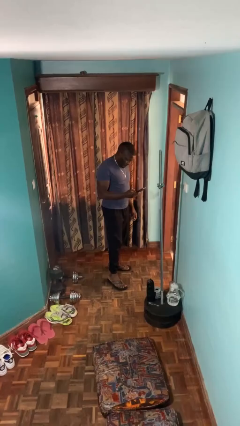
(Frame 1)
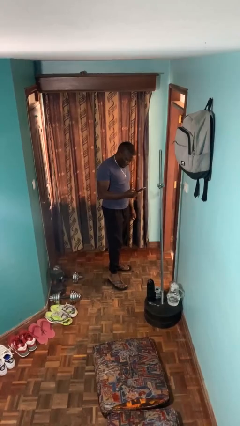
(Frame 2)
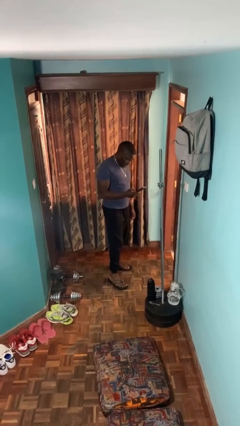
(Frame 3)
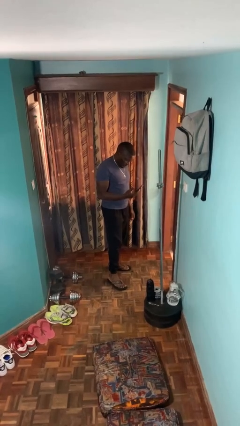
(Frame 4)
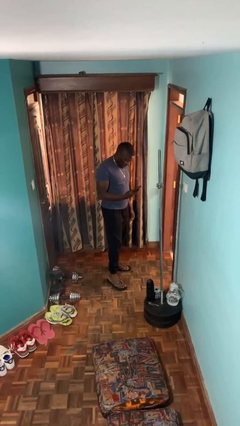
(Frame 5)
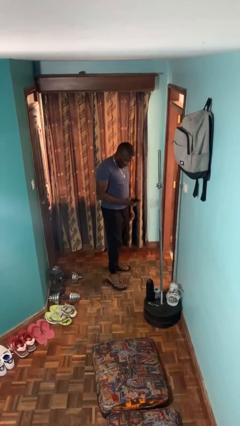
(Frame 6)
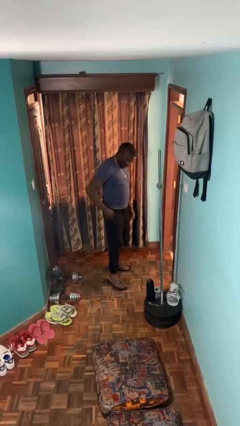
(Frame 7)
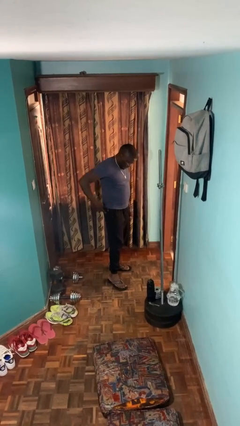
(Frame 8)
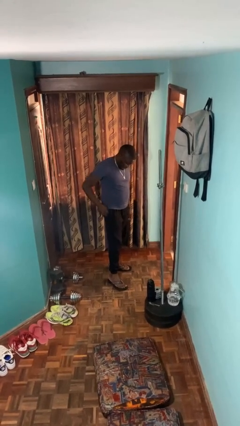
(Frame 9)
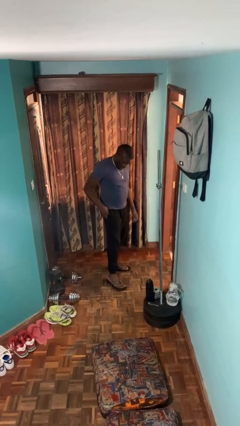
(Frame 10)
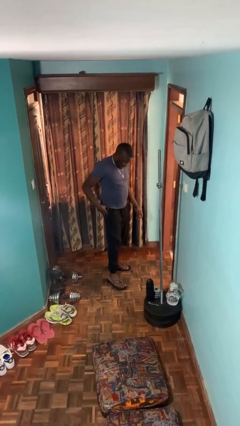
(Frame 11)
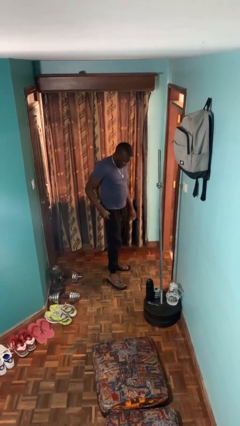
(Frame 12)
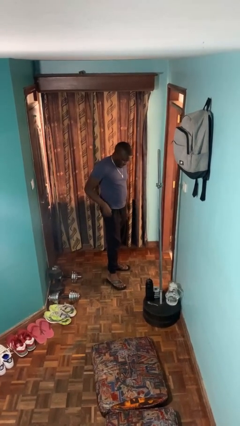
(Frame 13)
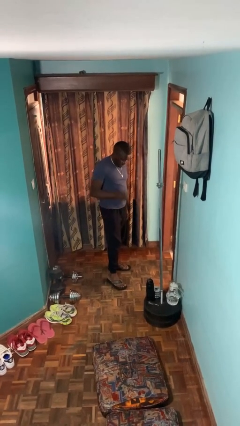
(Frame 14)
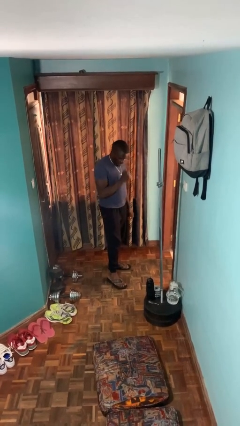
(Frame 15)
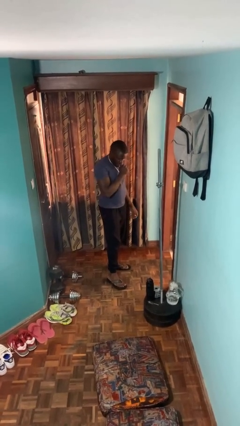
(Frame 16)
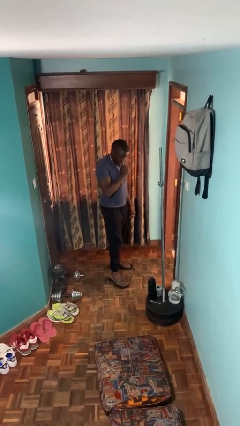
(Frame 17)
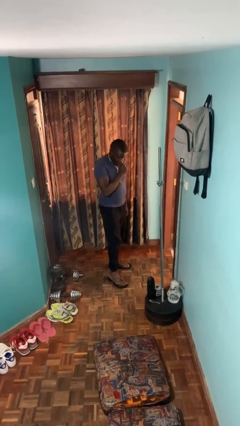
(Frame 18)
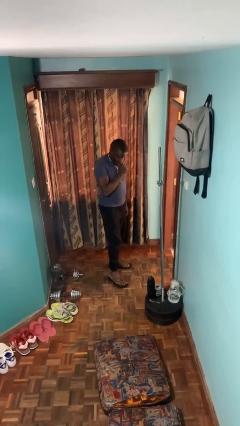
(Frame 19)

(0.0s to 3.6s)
person puts phone into pocket

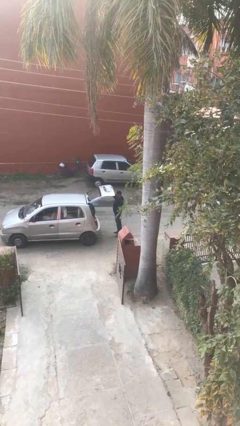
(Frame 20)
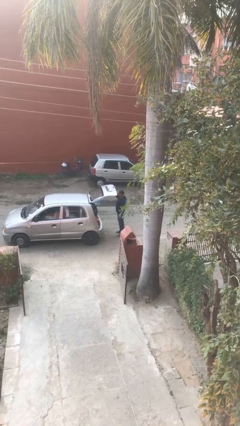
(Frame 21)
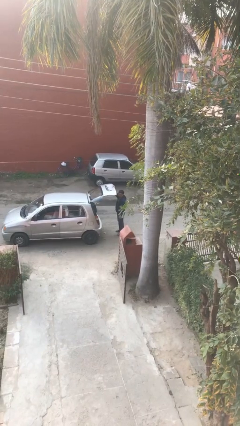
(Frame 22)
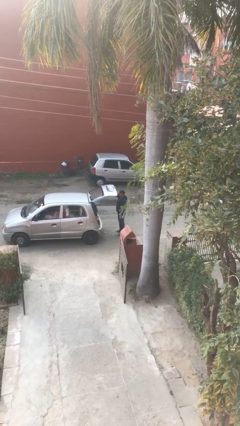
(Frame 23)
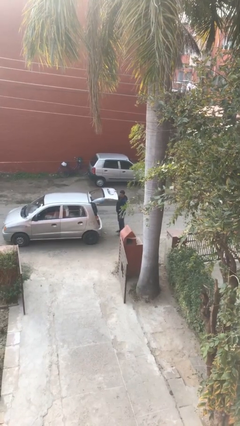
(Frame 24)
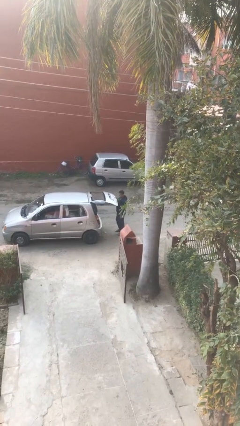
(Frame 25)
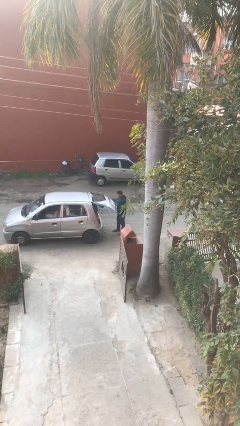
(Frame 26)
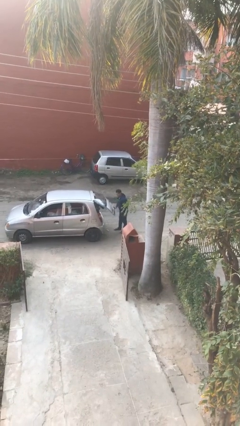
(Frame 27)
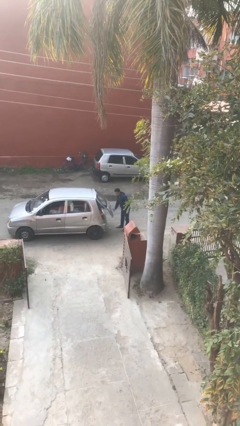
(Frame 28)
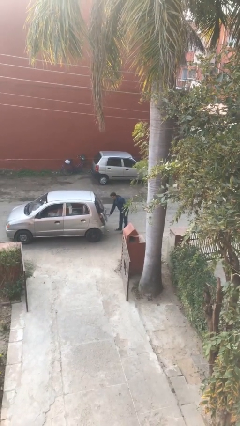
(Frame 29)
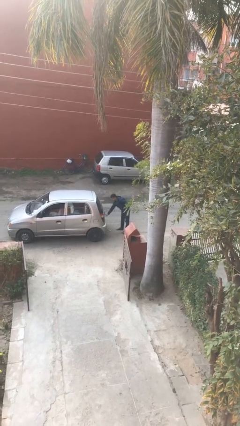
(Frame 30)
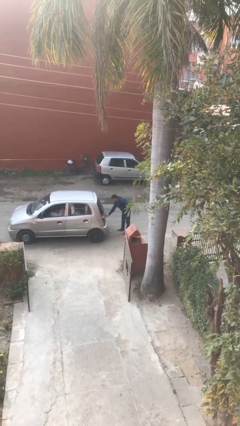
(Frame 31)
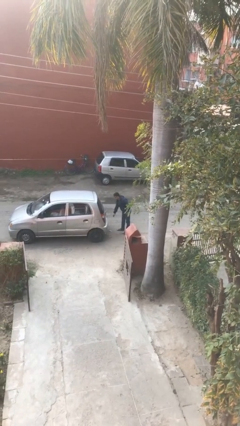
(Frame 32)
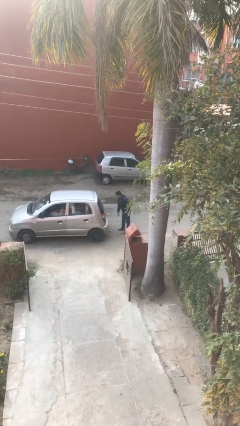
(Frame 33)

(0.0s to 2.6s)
person closes car trunk

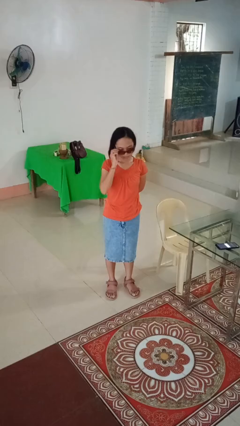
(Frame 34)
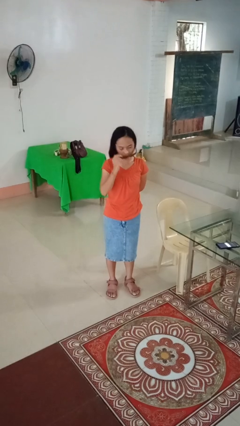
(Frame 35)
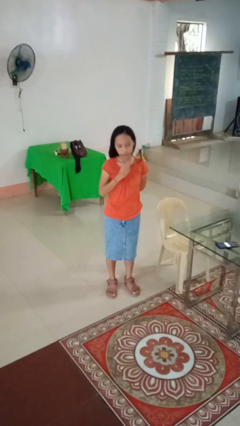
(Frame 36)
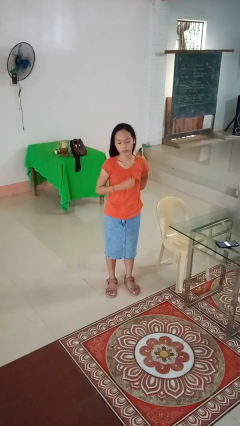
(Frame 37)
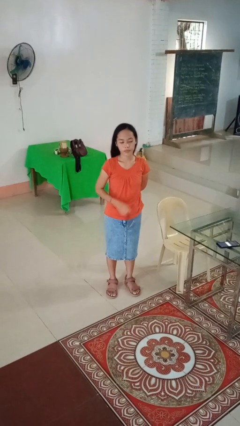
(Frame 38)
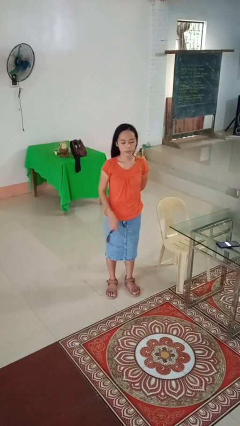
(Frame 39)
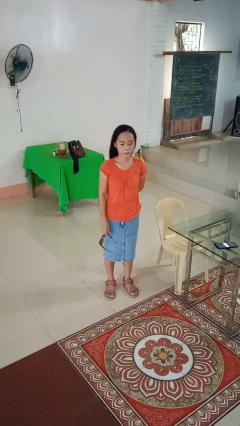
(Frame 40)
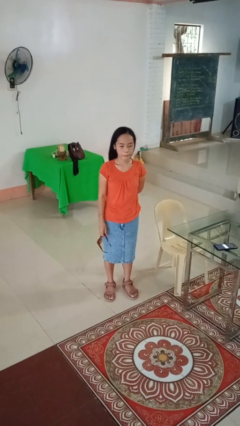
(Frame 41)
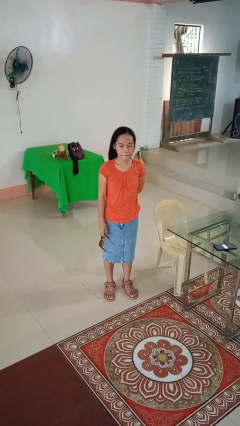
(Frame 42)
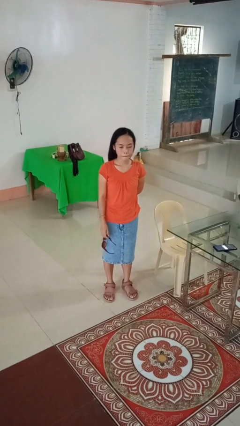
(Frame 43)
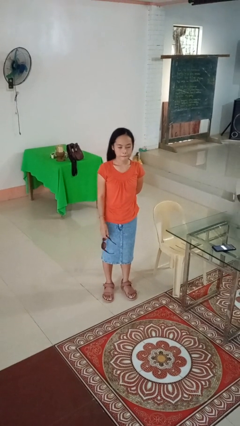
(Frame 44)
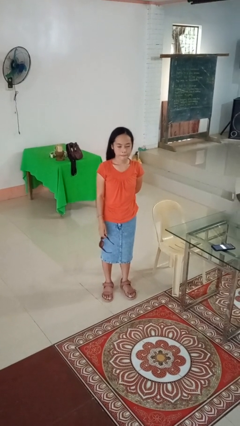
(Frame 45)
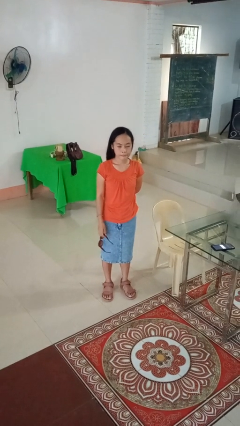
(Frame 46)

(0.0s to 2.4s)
person takes off sunglasses

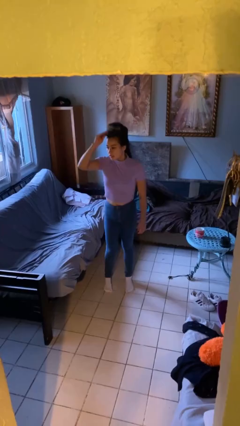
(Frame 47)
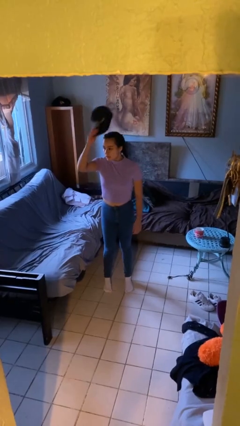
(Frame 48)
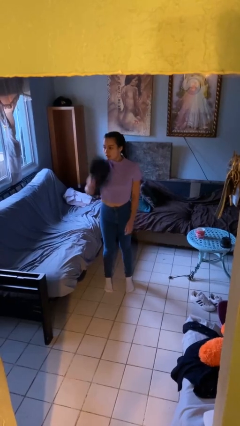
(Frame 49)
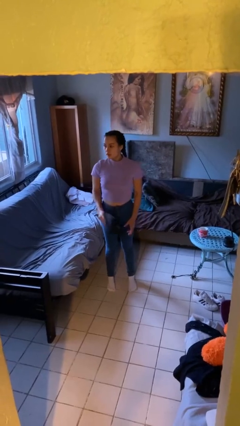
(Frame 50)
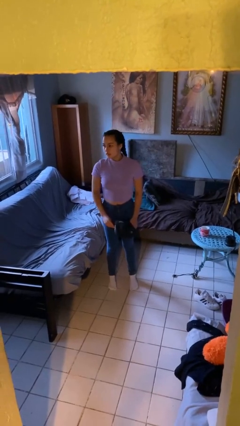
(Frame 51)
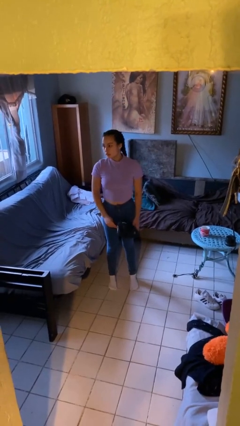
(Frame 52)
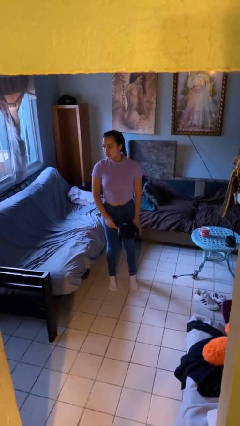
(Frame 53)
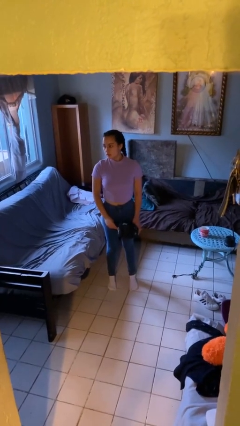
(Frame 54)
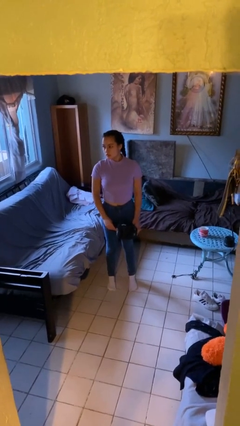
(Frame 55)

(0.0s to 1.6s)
person takes off hat

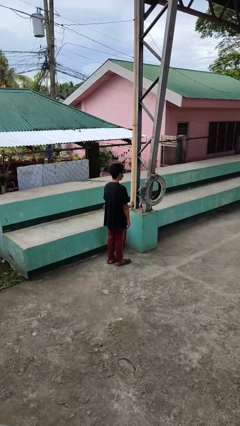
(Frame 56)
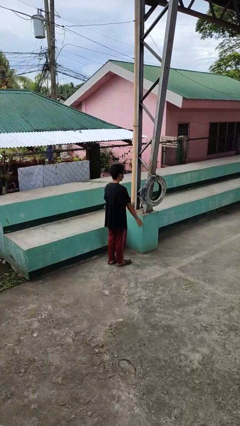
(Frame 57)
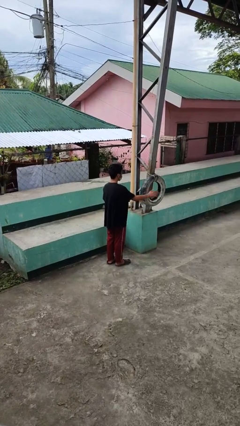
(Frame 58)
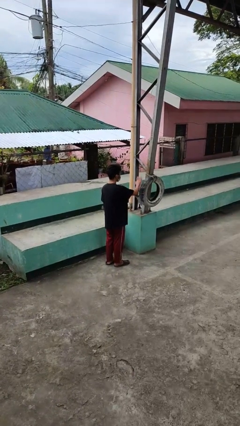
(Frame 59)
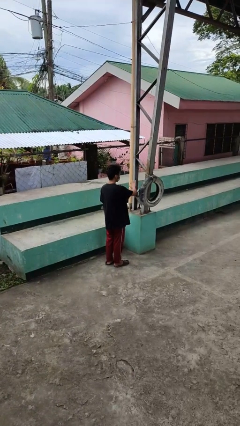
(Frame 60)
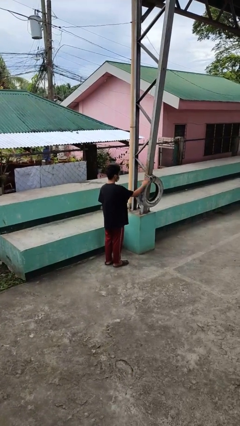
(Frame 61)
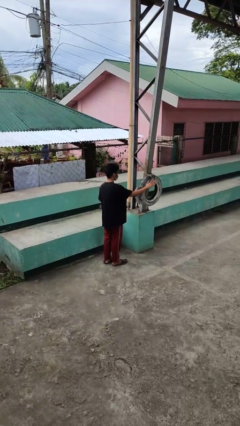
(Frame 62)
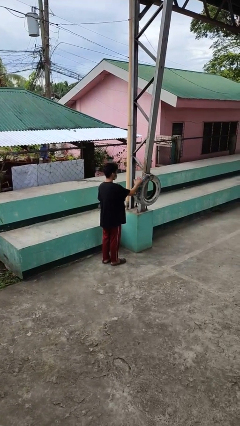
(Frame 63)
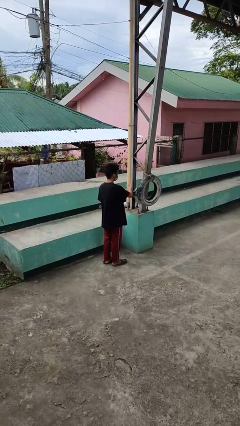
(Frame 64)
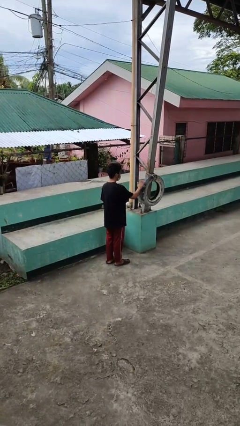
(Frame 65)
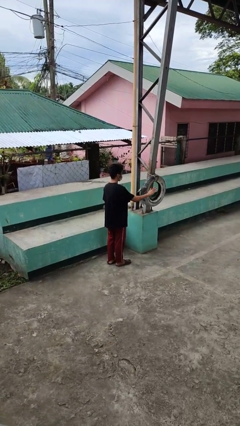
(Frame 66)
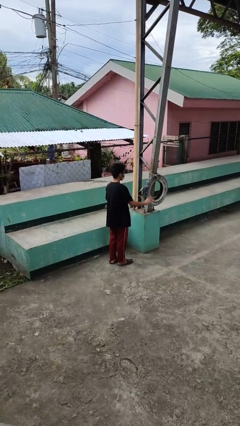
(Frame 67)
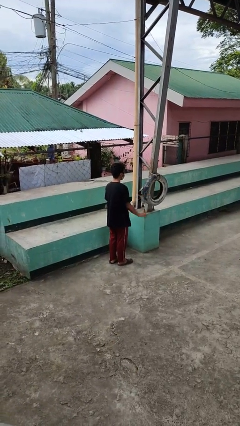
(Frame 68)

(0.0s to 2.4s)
person waves hand over object

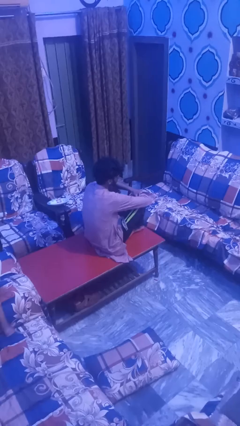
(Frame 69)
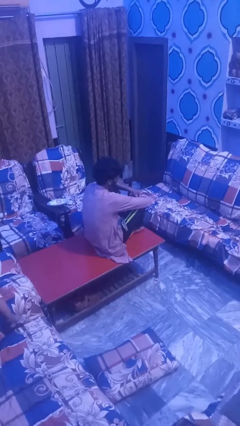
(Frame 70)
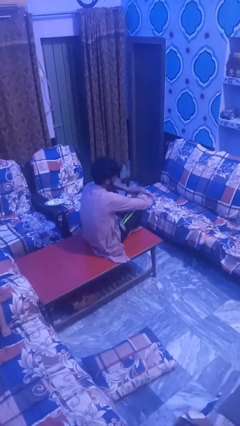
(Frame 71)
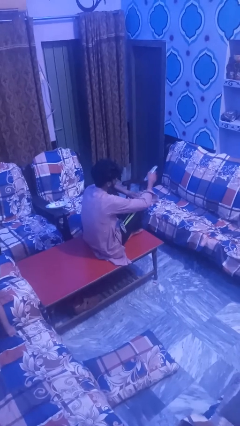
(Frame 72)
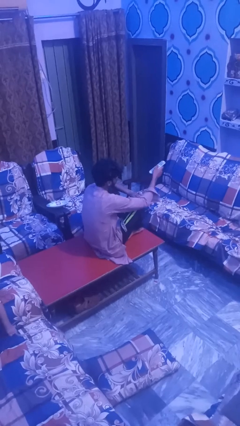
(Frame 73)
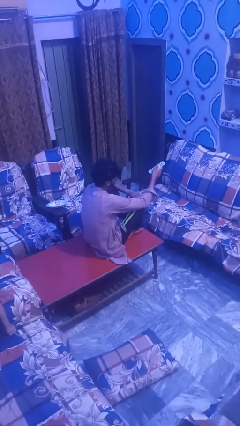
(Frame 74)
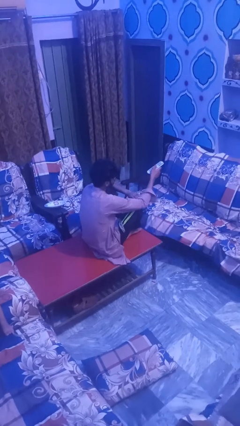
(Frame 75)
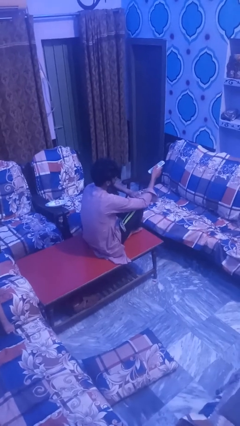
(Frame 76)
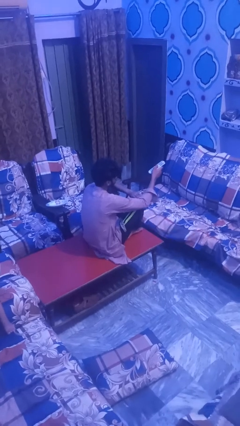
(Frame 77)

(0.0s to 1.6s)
person uses television remote

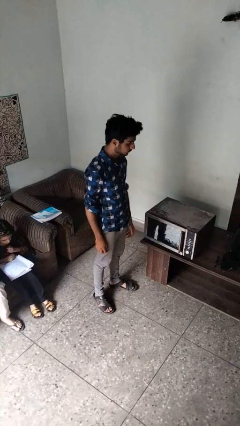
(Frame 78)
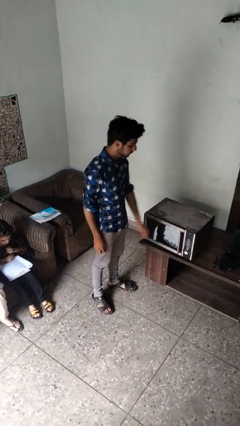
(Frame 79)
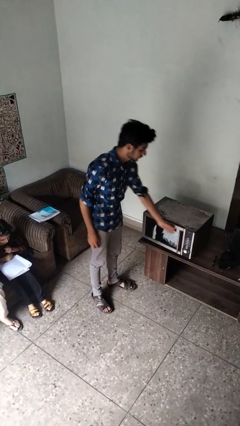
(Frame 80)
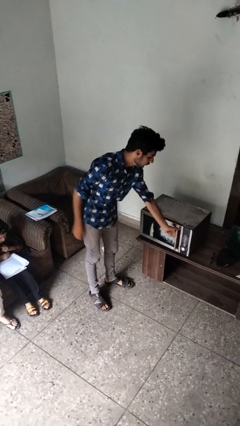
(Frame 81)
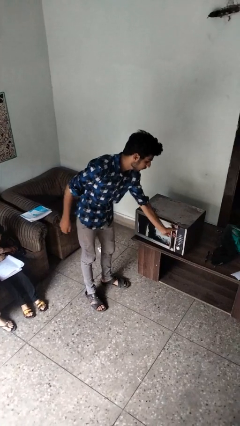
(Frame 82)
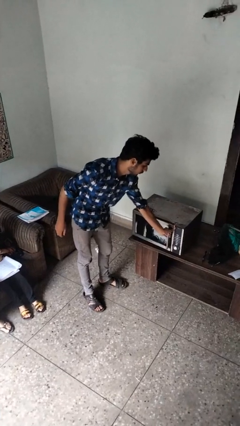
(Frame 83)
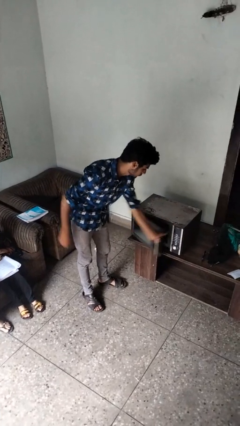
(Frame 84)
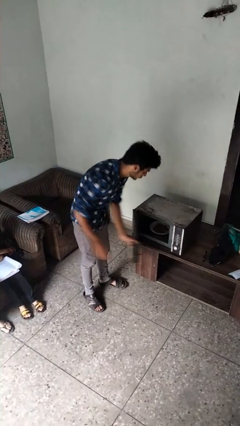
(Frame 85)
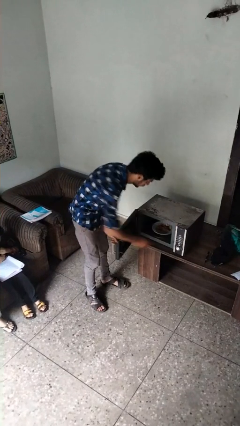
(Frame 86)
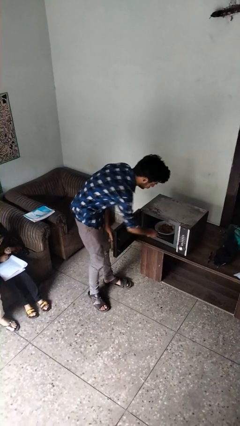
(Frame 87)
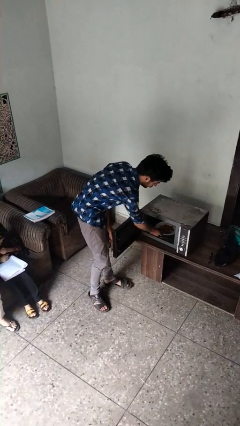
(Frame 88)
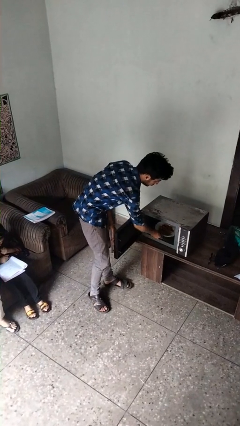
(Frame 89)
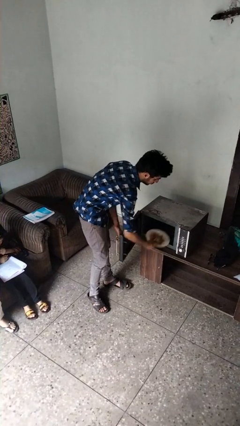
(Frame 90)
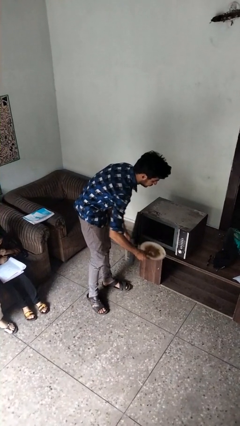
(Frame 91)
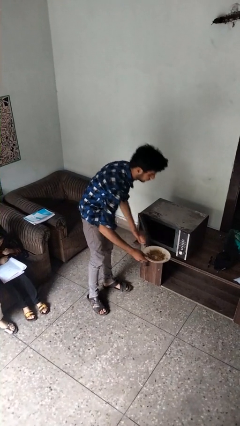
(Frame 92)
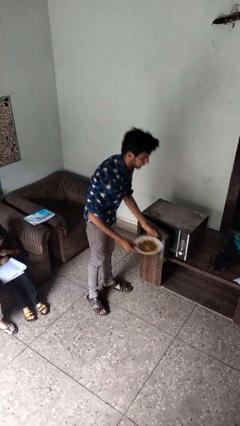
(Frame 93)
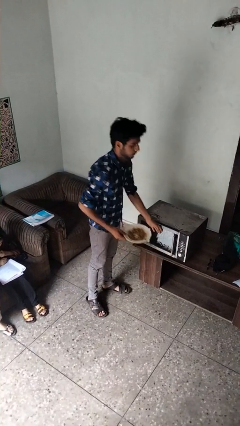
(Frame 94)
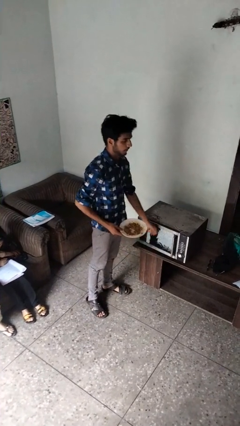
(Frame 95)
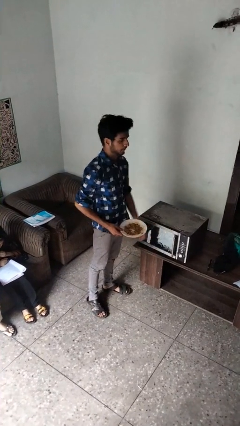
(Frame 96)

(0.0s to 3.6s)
person takes object from microwave
